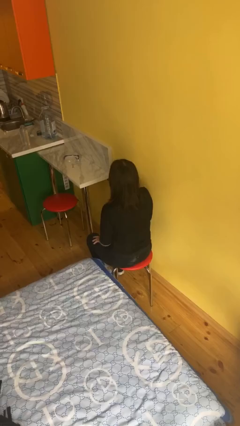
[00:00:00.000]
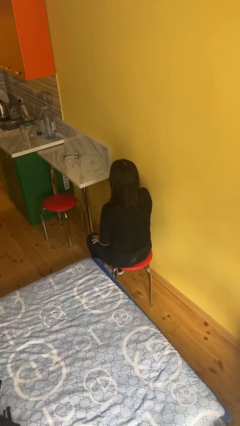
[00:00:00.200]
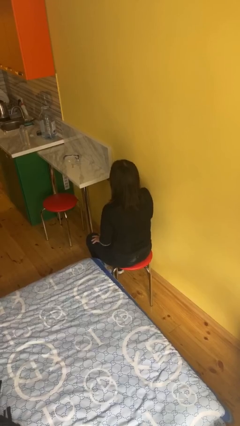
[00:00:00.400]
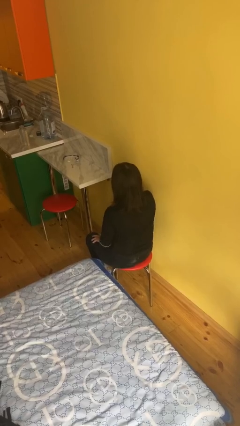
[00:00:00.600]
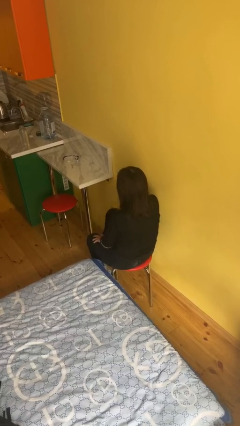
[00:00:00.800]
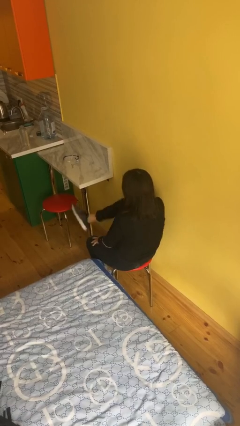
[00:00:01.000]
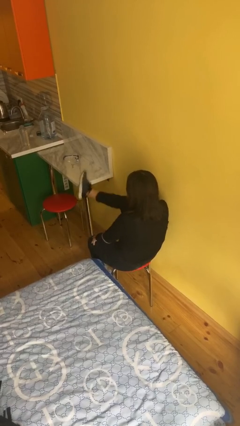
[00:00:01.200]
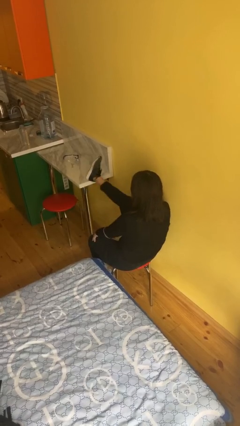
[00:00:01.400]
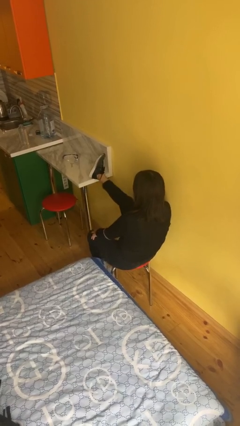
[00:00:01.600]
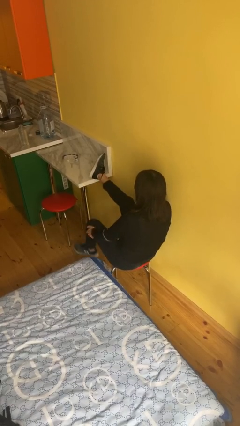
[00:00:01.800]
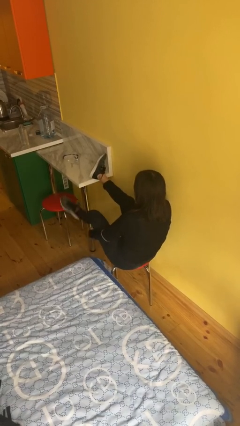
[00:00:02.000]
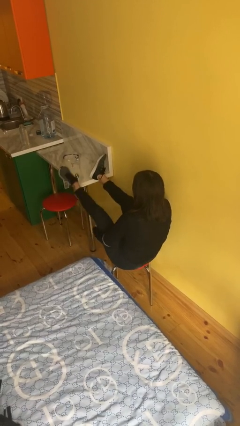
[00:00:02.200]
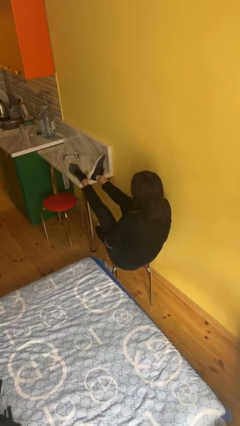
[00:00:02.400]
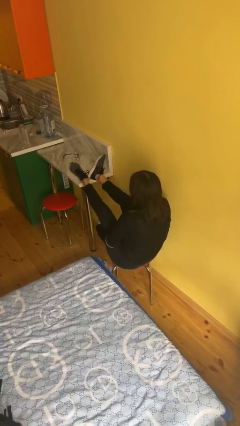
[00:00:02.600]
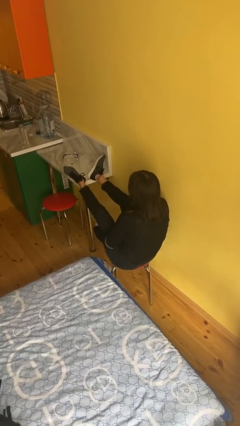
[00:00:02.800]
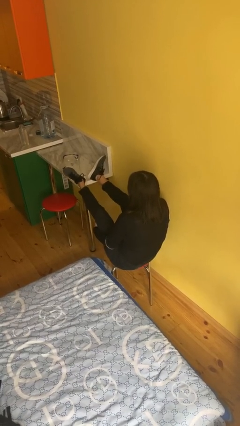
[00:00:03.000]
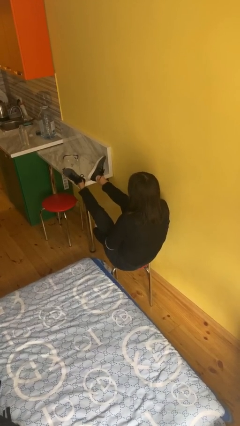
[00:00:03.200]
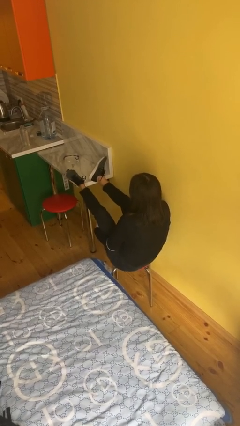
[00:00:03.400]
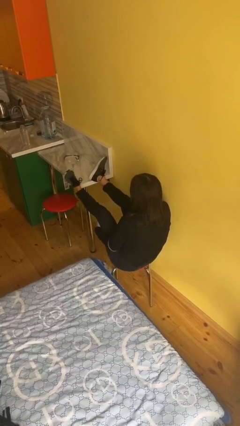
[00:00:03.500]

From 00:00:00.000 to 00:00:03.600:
person puts feet up

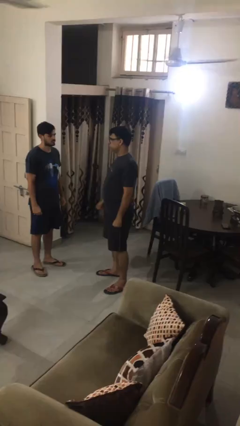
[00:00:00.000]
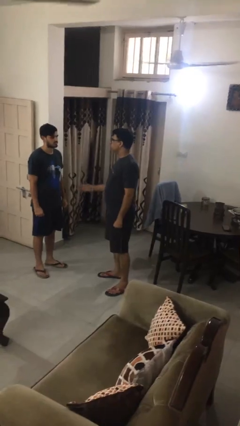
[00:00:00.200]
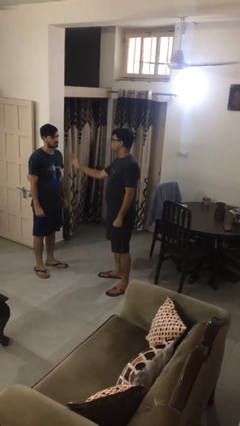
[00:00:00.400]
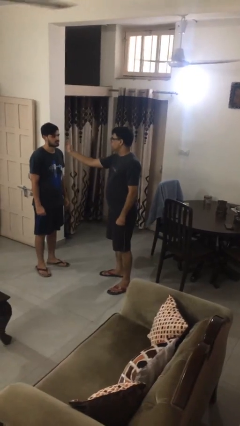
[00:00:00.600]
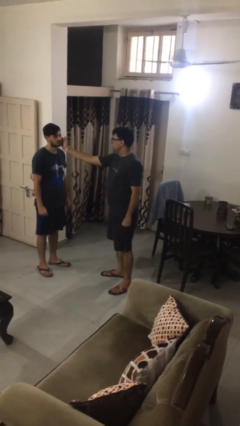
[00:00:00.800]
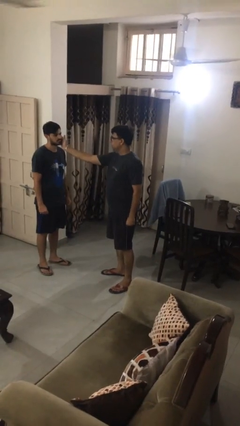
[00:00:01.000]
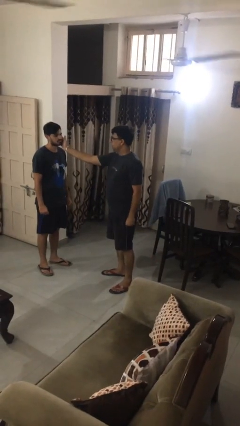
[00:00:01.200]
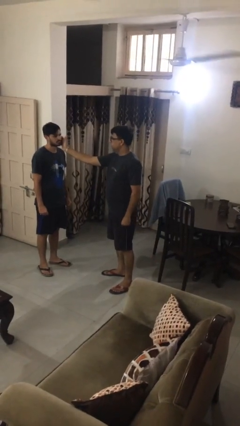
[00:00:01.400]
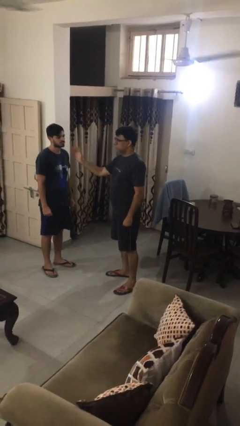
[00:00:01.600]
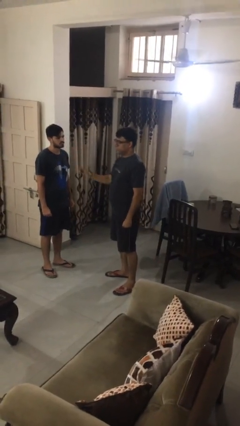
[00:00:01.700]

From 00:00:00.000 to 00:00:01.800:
person touches face of person

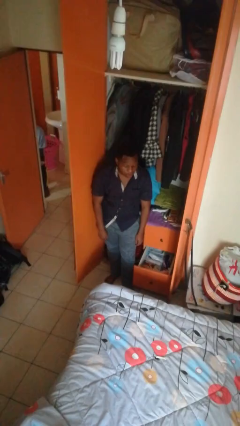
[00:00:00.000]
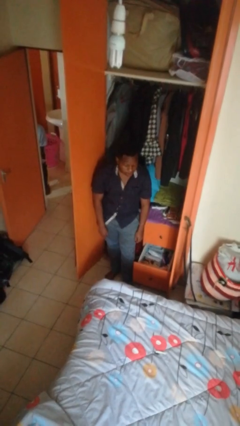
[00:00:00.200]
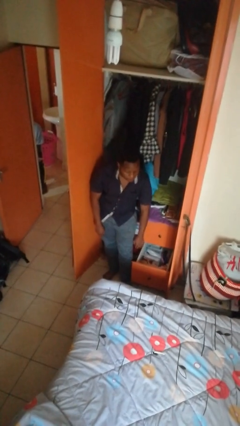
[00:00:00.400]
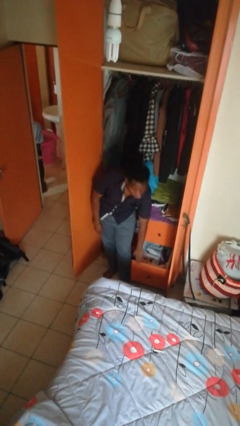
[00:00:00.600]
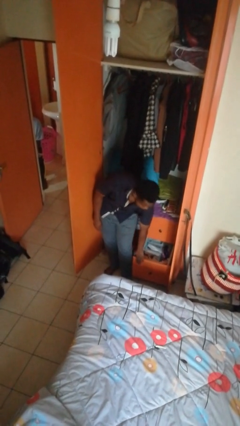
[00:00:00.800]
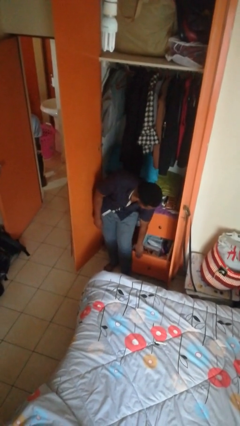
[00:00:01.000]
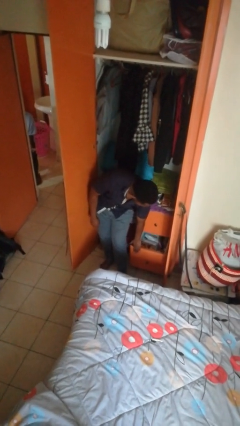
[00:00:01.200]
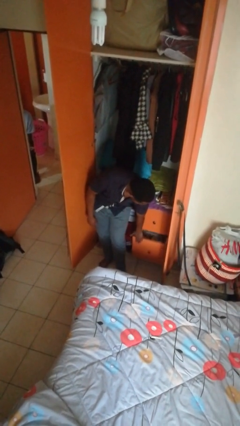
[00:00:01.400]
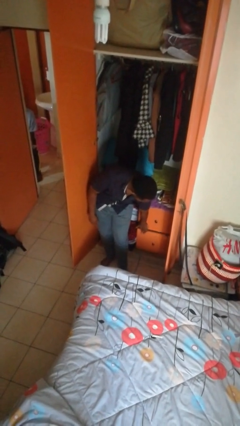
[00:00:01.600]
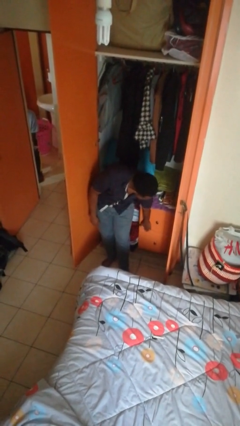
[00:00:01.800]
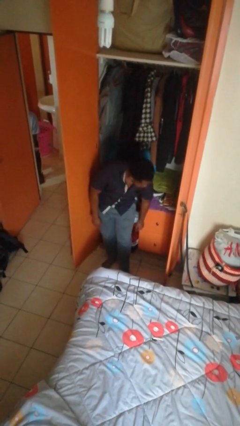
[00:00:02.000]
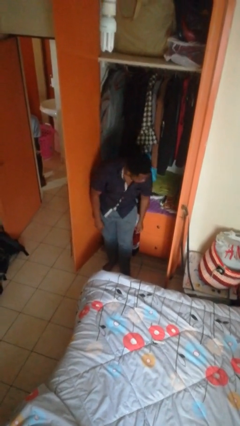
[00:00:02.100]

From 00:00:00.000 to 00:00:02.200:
person closes dresser drawer

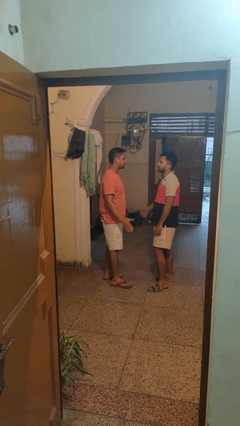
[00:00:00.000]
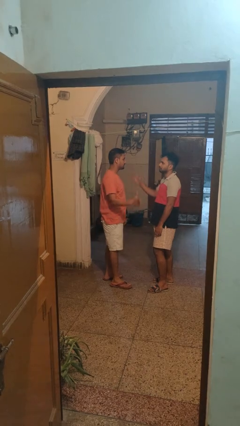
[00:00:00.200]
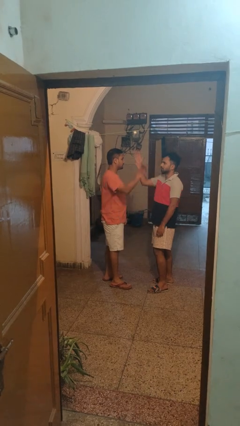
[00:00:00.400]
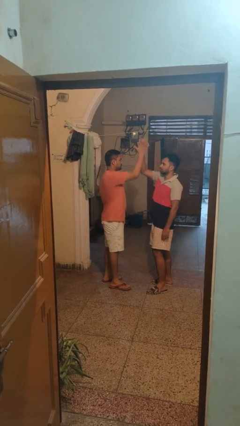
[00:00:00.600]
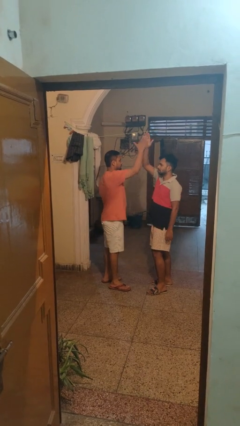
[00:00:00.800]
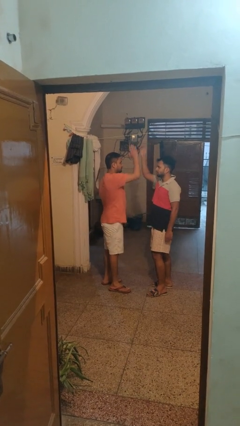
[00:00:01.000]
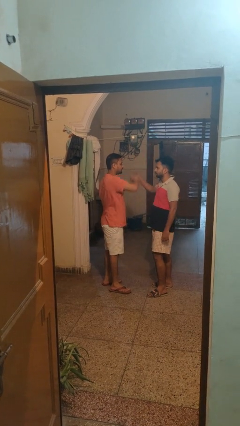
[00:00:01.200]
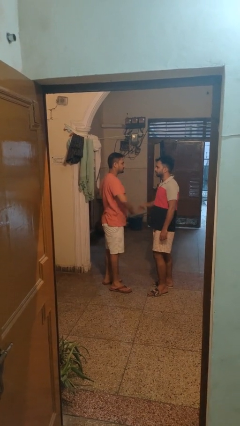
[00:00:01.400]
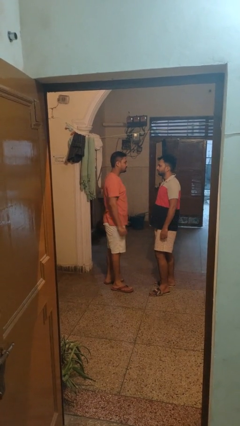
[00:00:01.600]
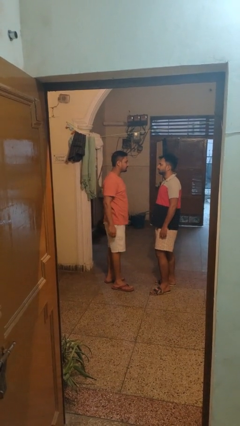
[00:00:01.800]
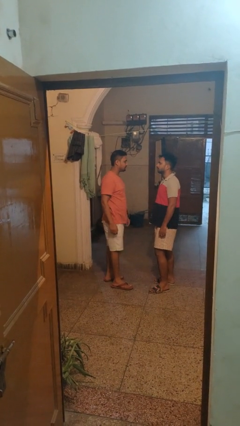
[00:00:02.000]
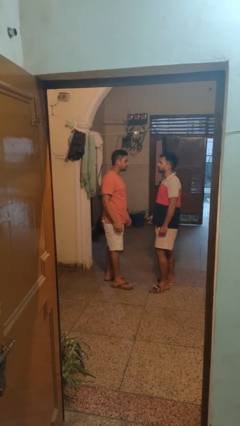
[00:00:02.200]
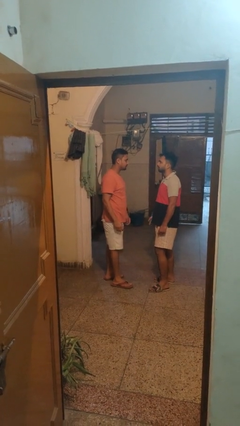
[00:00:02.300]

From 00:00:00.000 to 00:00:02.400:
person highfives hand

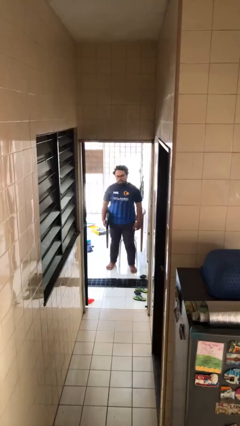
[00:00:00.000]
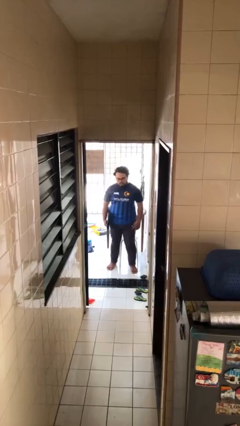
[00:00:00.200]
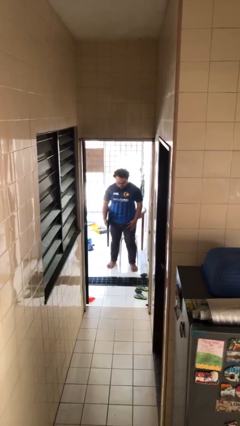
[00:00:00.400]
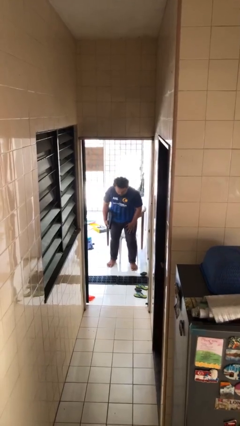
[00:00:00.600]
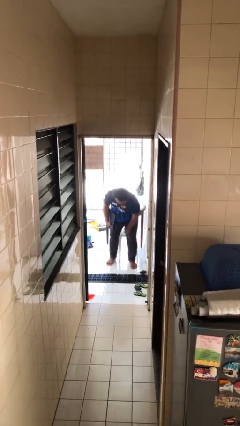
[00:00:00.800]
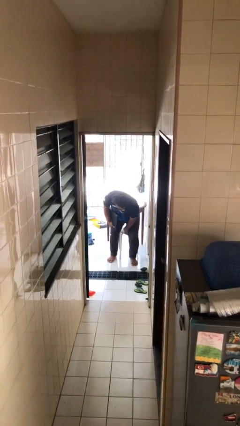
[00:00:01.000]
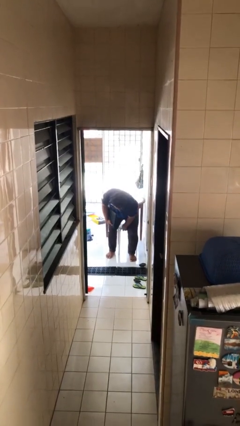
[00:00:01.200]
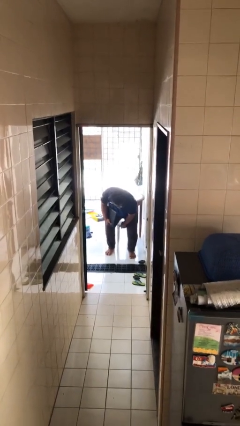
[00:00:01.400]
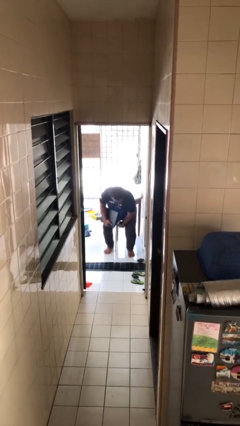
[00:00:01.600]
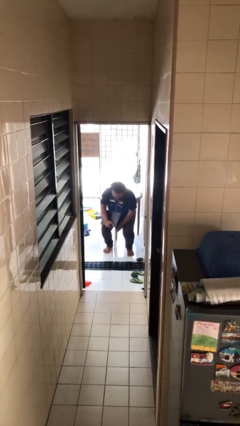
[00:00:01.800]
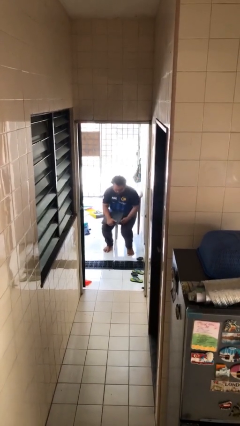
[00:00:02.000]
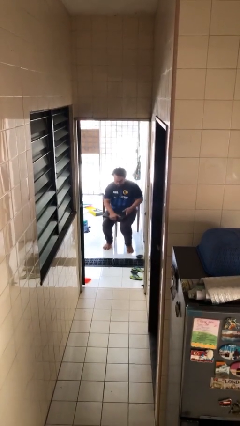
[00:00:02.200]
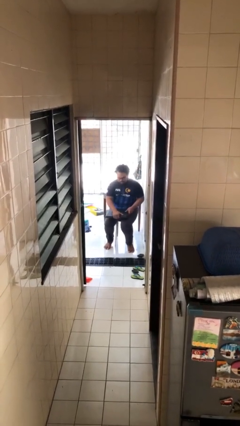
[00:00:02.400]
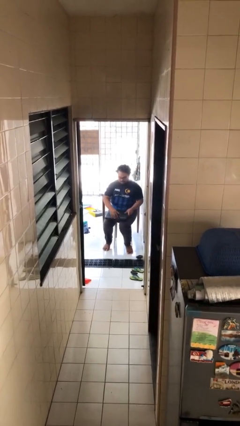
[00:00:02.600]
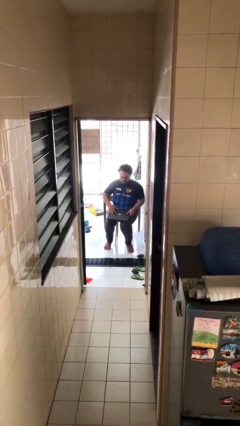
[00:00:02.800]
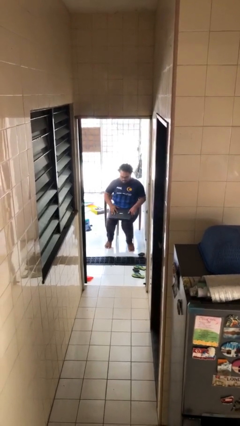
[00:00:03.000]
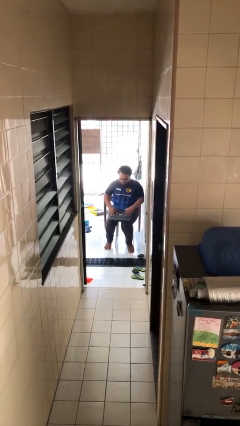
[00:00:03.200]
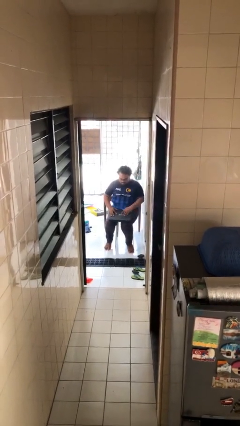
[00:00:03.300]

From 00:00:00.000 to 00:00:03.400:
person sits down

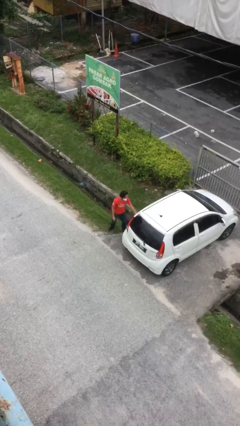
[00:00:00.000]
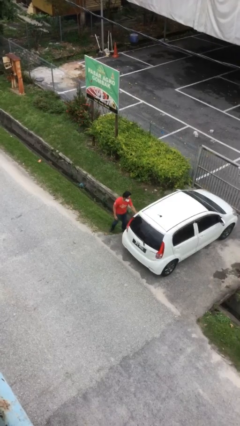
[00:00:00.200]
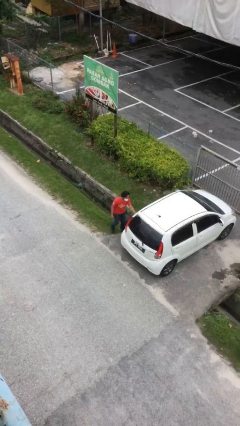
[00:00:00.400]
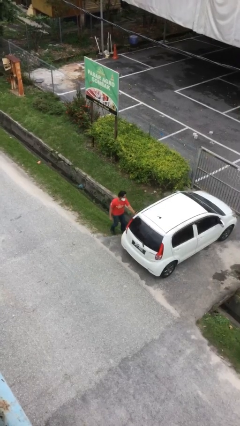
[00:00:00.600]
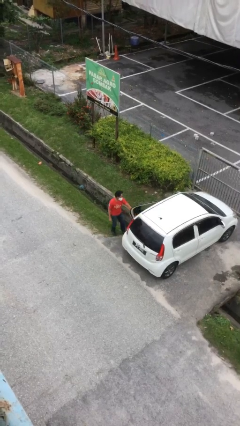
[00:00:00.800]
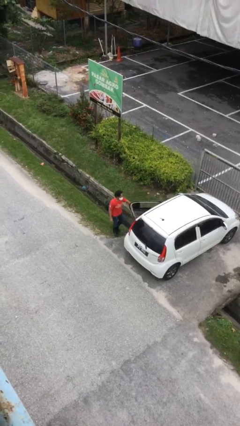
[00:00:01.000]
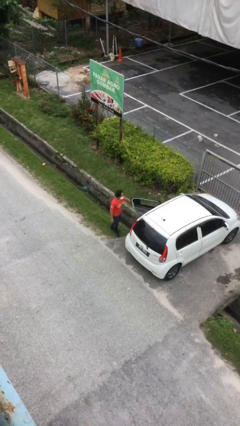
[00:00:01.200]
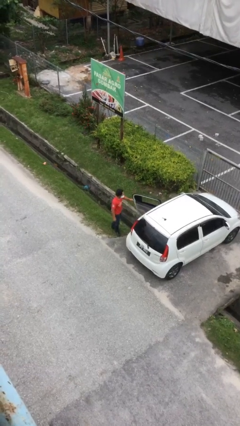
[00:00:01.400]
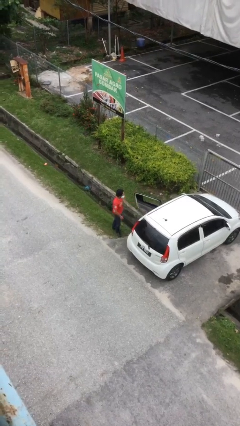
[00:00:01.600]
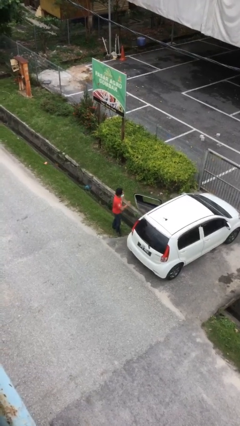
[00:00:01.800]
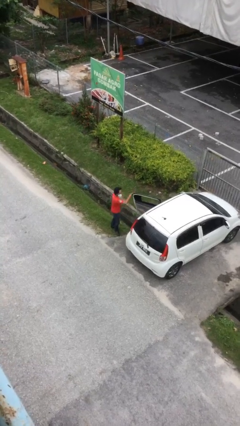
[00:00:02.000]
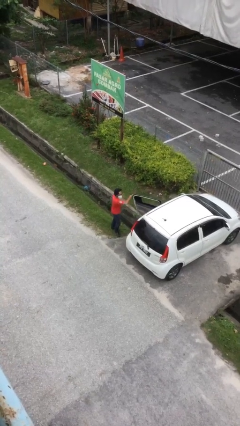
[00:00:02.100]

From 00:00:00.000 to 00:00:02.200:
person opens car door

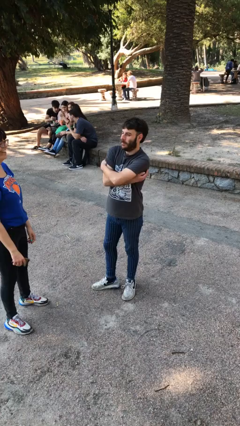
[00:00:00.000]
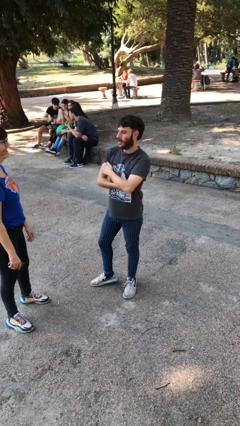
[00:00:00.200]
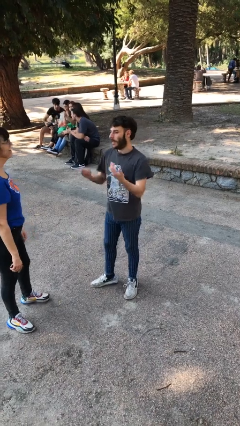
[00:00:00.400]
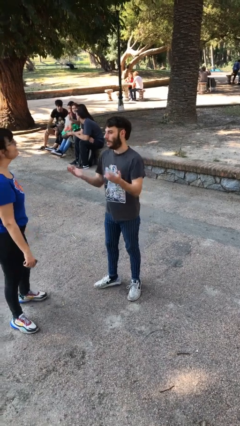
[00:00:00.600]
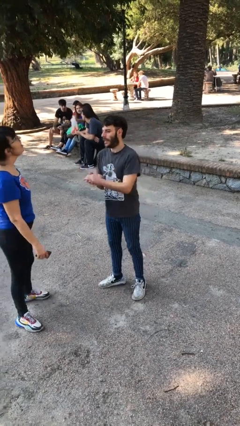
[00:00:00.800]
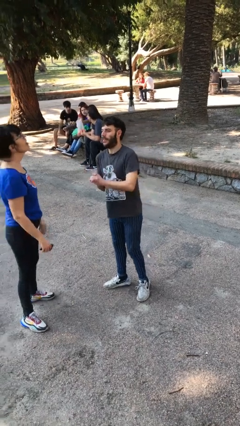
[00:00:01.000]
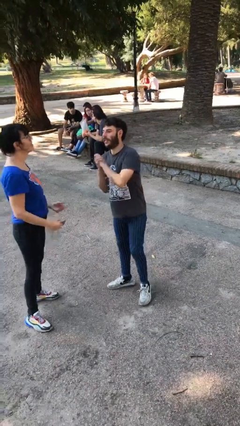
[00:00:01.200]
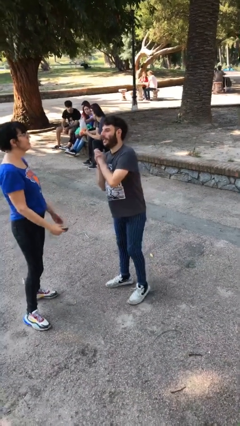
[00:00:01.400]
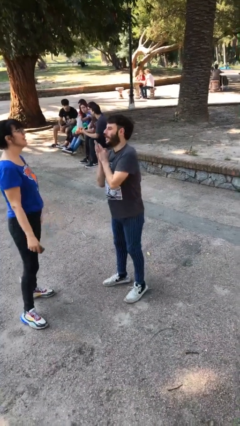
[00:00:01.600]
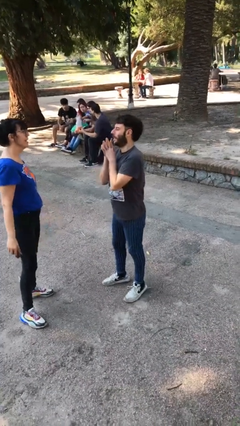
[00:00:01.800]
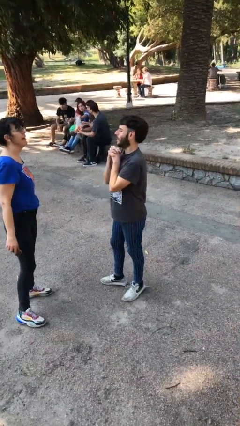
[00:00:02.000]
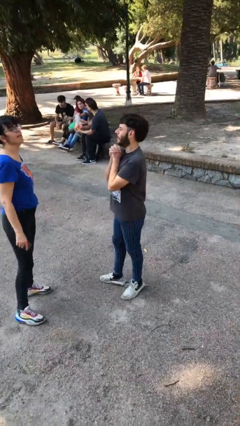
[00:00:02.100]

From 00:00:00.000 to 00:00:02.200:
person talks to person
